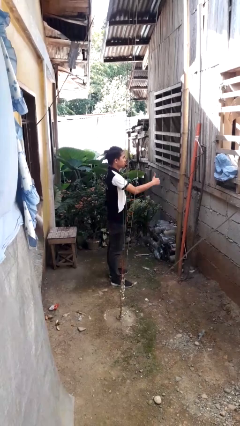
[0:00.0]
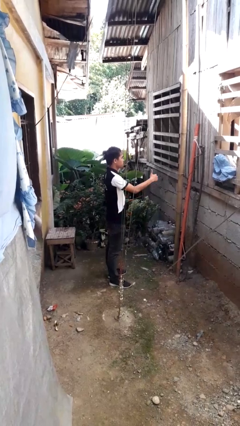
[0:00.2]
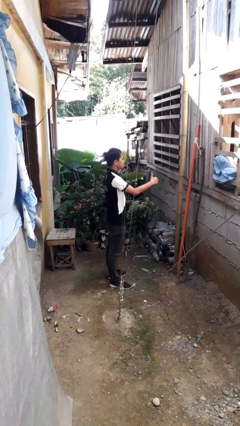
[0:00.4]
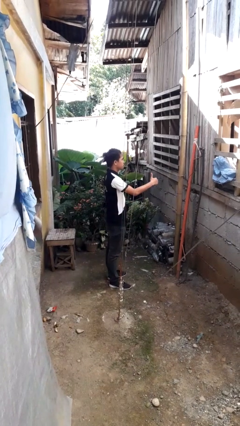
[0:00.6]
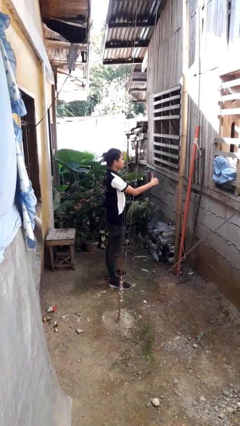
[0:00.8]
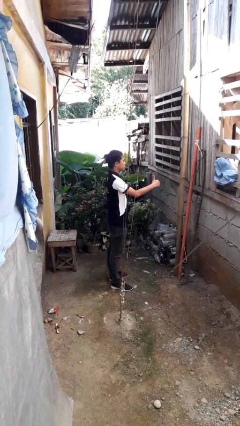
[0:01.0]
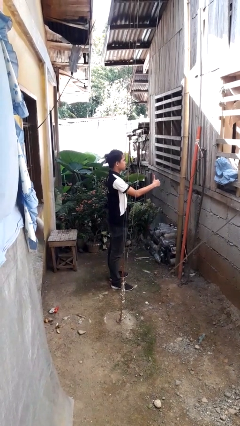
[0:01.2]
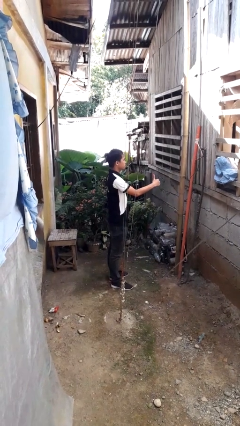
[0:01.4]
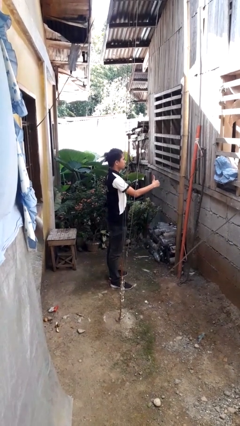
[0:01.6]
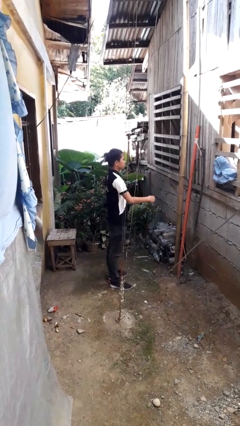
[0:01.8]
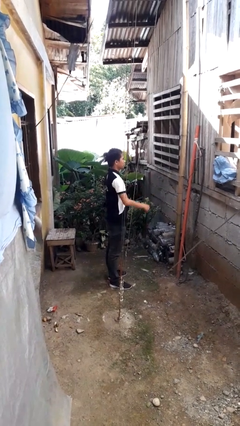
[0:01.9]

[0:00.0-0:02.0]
person gestures thumbs up

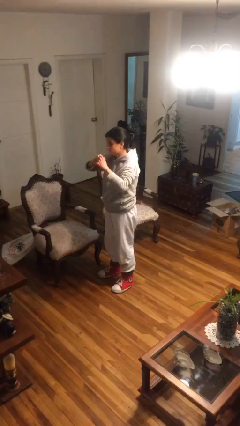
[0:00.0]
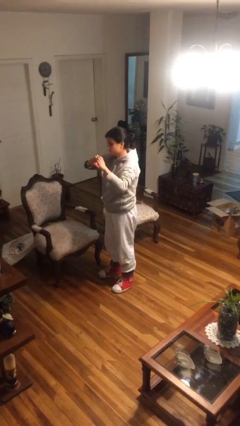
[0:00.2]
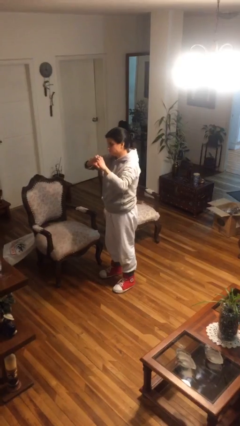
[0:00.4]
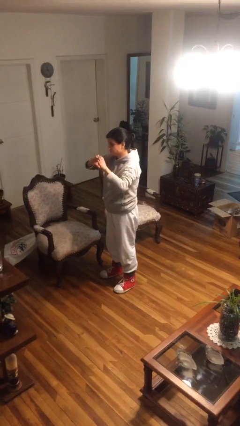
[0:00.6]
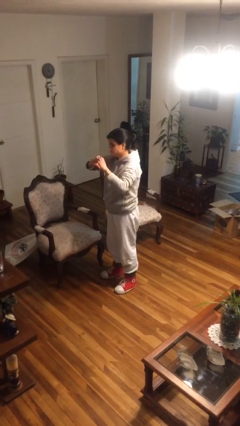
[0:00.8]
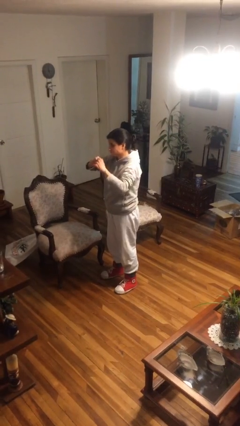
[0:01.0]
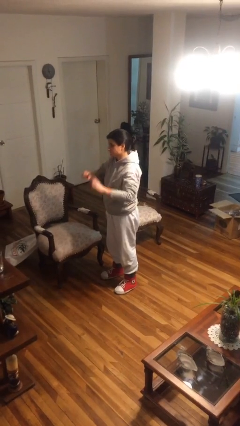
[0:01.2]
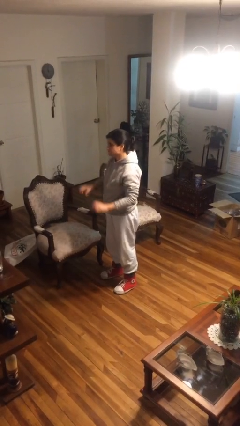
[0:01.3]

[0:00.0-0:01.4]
person gestures heart

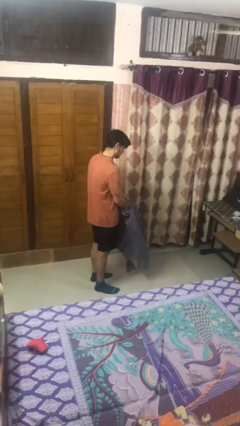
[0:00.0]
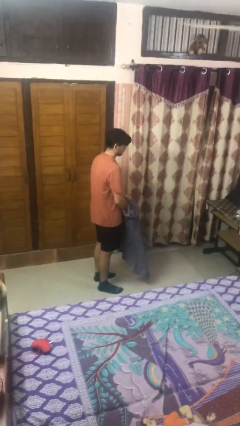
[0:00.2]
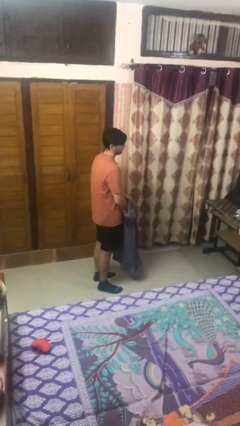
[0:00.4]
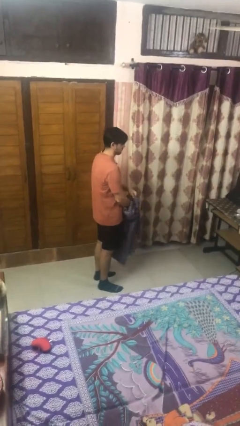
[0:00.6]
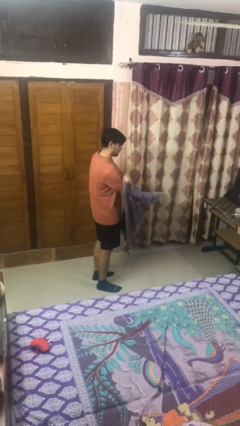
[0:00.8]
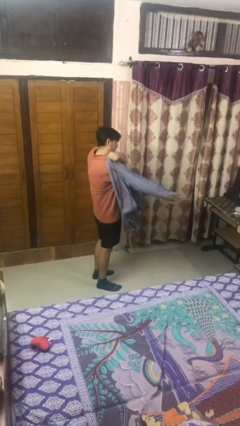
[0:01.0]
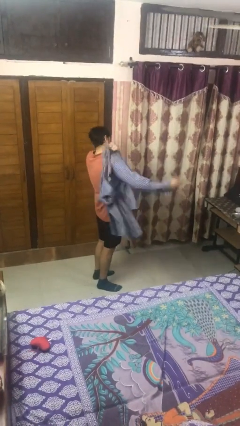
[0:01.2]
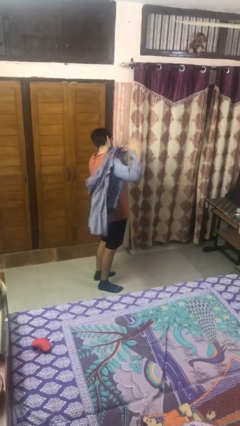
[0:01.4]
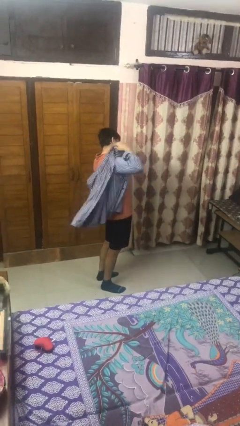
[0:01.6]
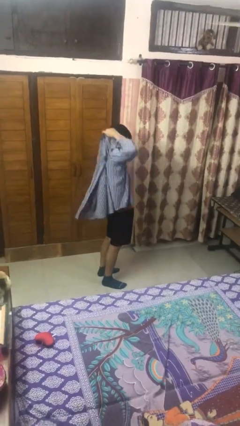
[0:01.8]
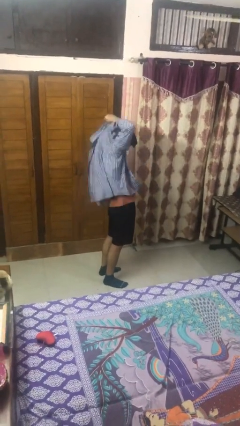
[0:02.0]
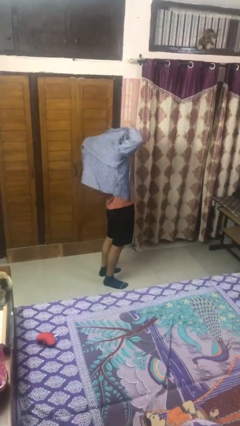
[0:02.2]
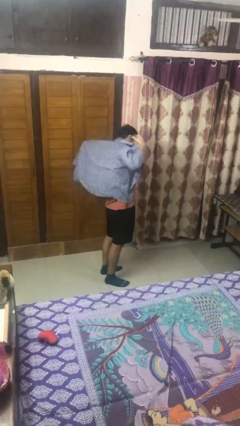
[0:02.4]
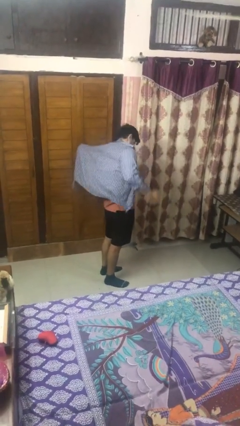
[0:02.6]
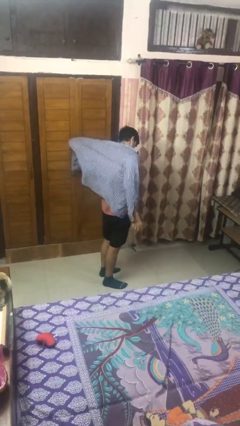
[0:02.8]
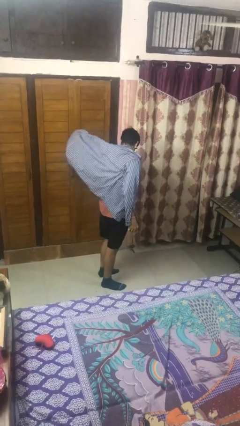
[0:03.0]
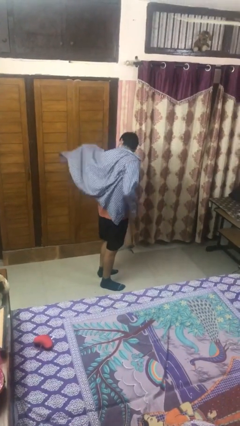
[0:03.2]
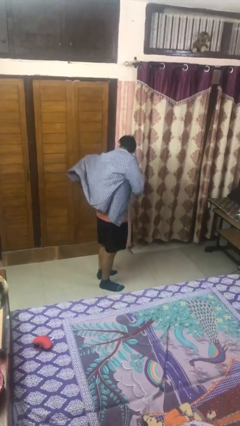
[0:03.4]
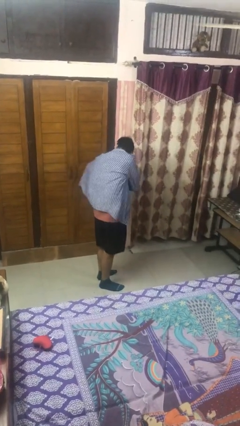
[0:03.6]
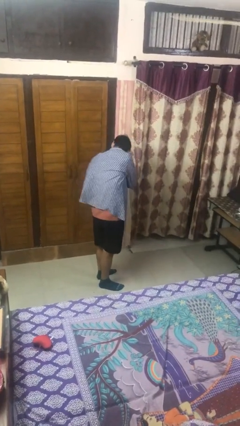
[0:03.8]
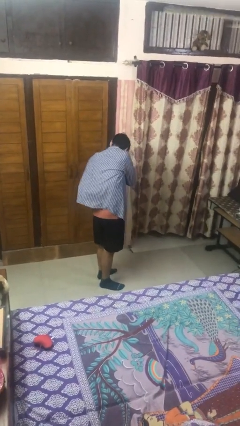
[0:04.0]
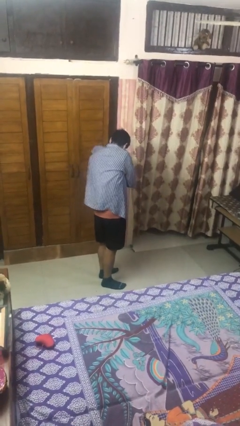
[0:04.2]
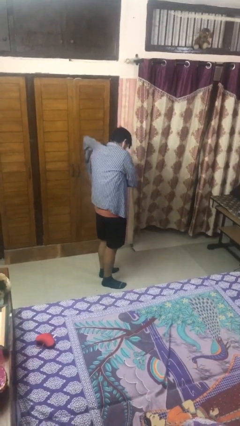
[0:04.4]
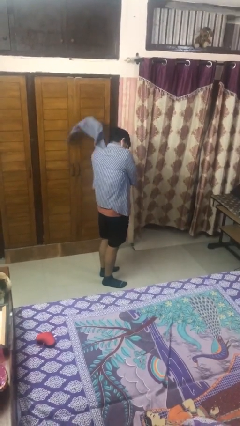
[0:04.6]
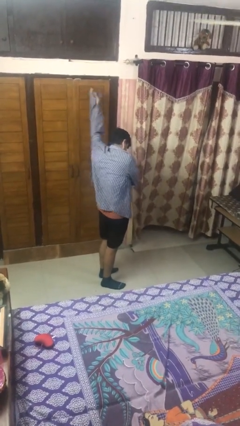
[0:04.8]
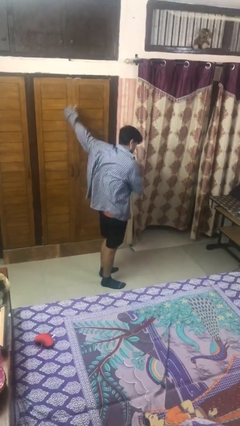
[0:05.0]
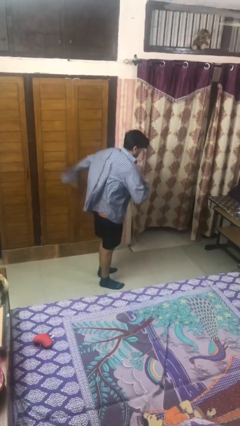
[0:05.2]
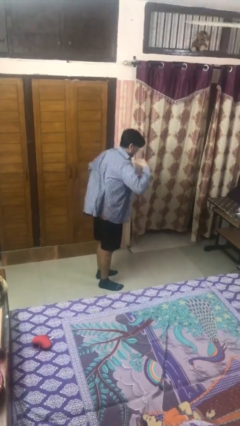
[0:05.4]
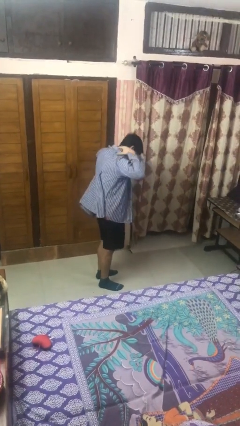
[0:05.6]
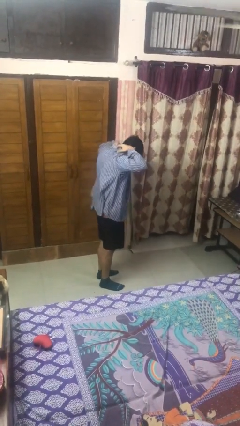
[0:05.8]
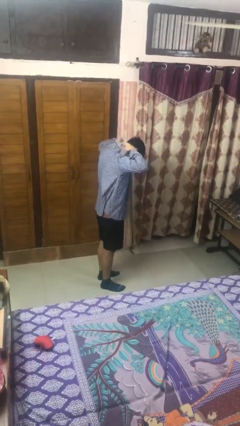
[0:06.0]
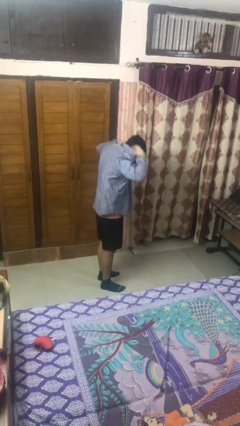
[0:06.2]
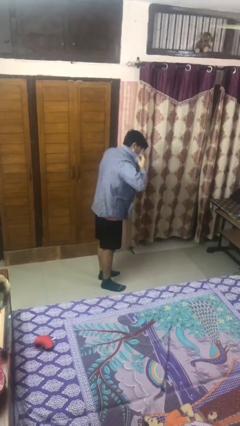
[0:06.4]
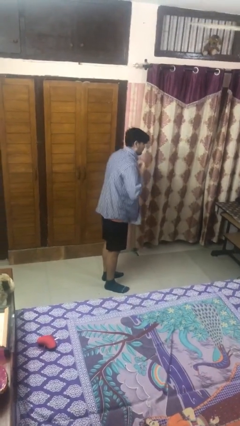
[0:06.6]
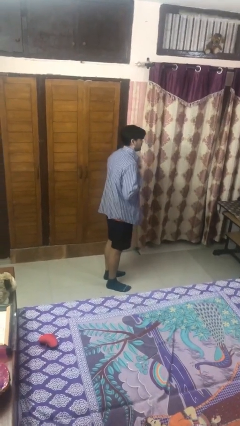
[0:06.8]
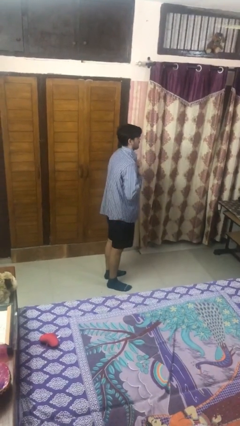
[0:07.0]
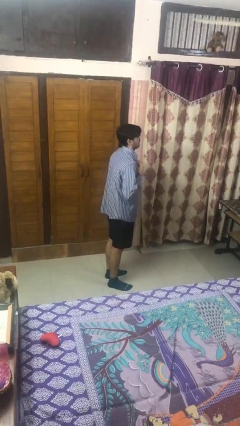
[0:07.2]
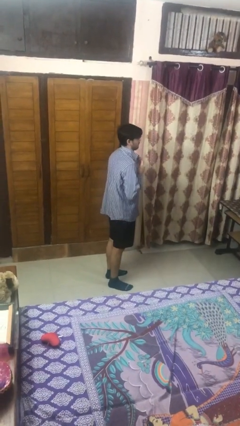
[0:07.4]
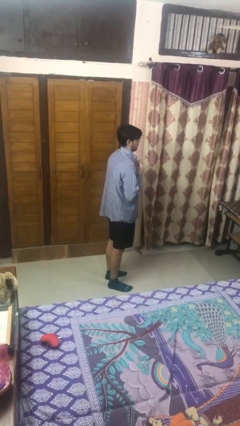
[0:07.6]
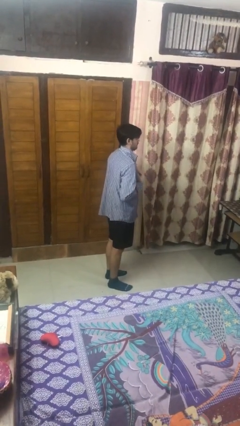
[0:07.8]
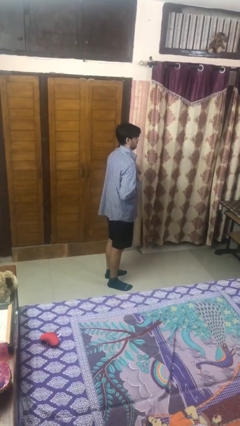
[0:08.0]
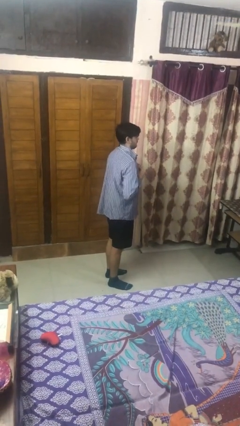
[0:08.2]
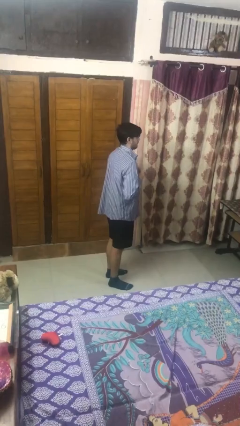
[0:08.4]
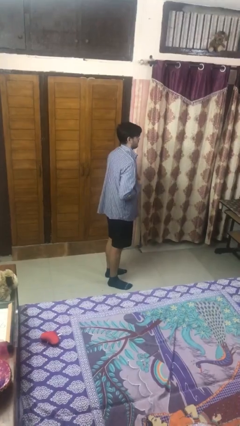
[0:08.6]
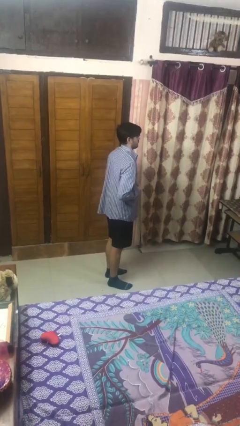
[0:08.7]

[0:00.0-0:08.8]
person puts on shirt

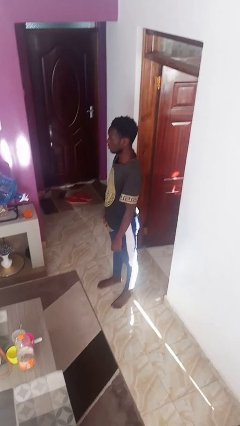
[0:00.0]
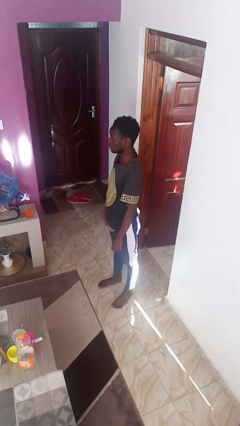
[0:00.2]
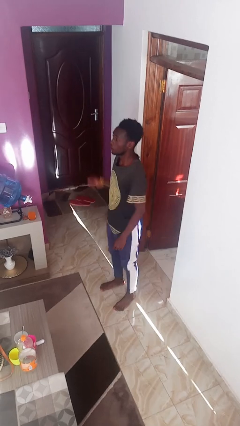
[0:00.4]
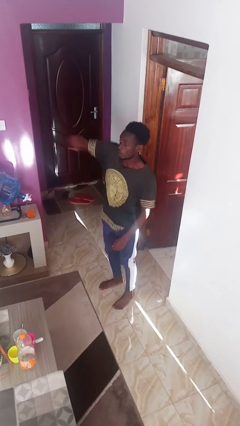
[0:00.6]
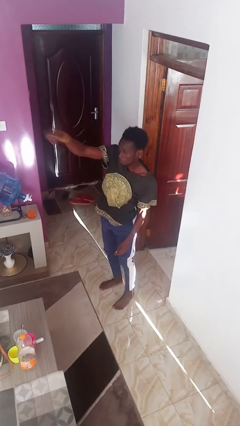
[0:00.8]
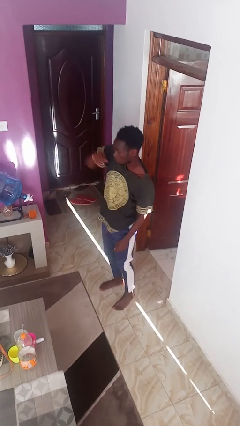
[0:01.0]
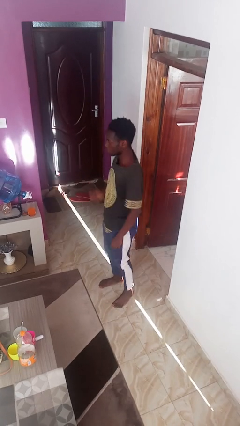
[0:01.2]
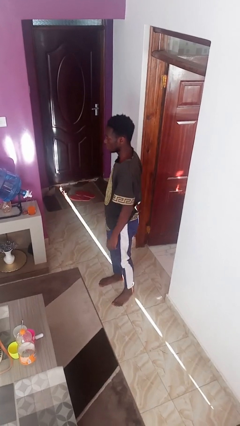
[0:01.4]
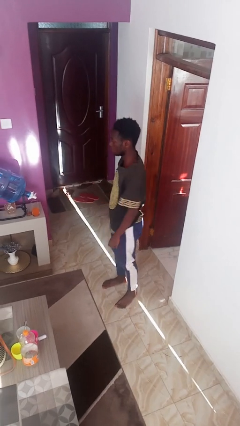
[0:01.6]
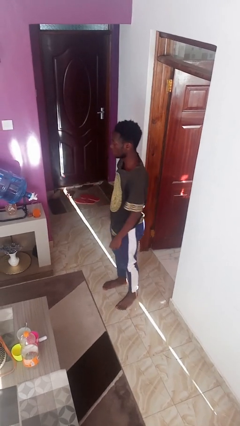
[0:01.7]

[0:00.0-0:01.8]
person punches

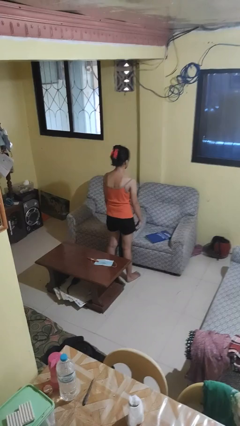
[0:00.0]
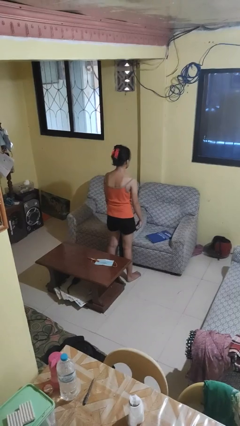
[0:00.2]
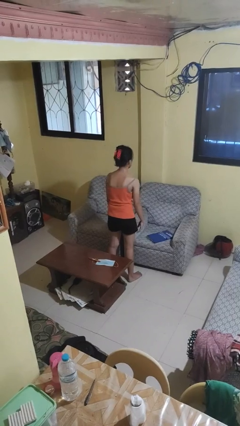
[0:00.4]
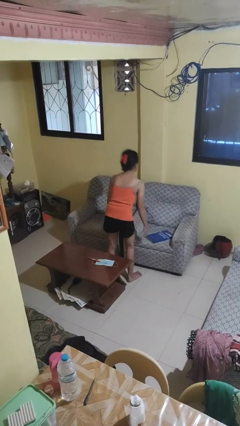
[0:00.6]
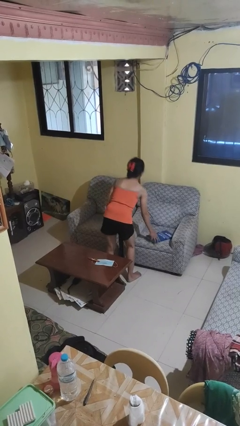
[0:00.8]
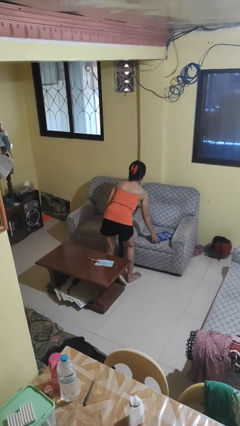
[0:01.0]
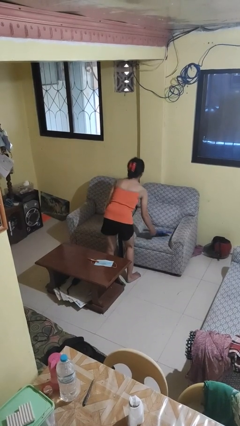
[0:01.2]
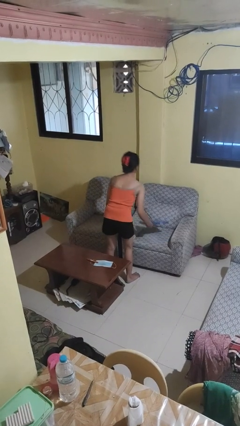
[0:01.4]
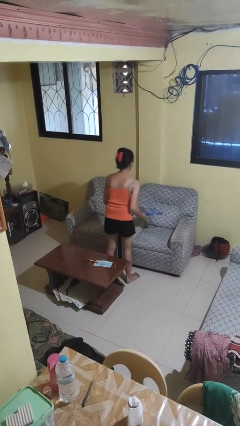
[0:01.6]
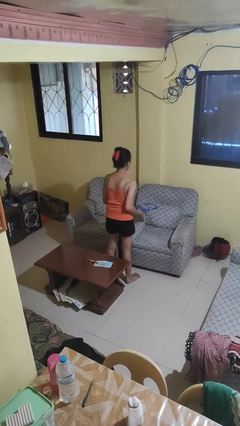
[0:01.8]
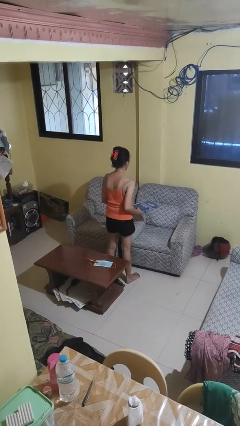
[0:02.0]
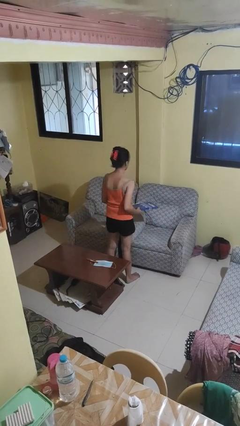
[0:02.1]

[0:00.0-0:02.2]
person picks up object from couch

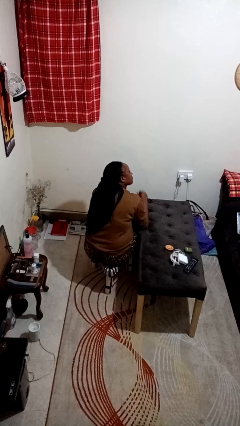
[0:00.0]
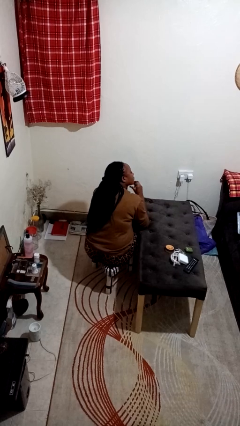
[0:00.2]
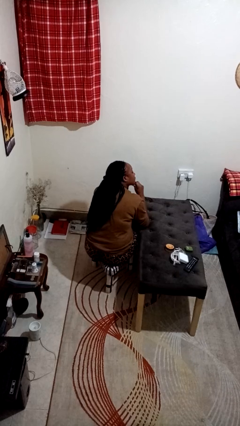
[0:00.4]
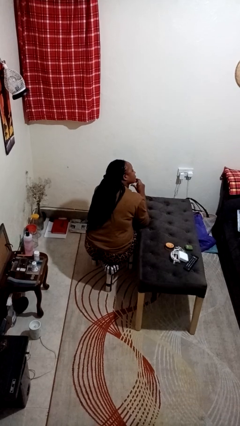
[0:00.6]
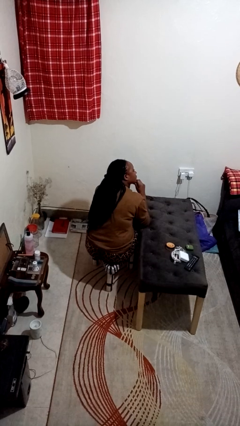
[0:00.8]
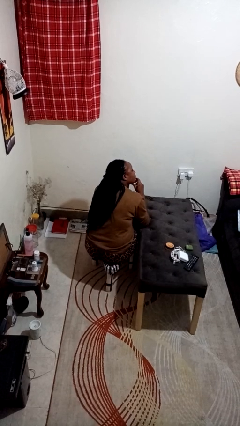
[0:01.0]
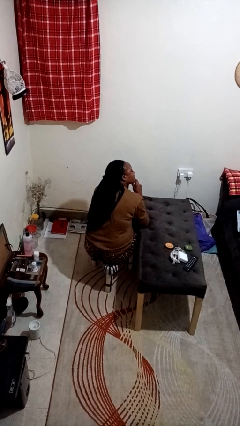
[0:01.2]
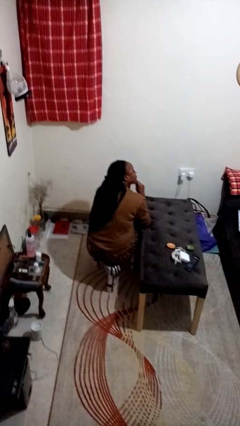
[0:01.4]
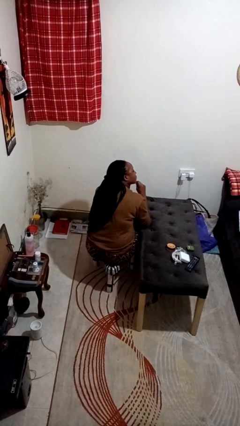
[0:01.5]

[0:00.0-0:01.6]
person strokes chin
